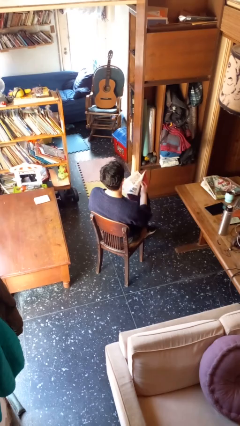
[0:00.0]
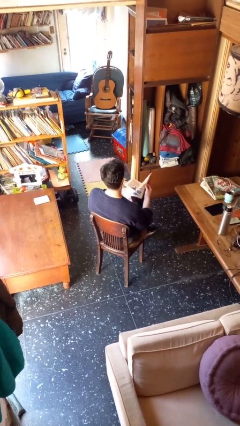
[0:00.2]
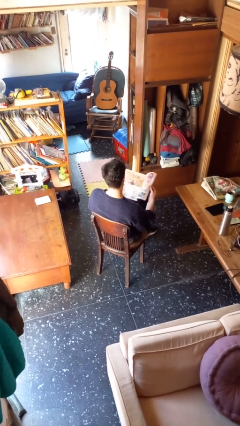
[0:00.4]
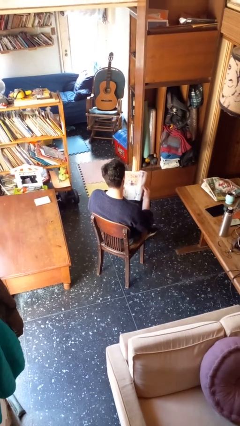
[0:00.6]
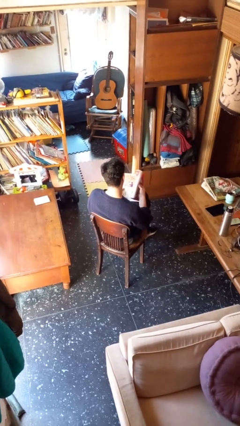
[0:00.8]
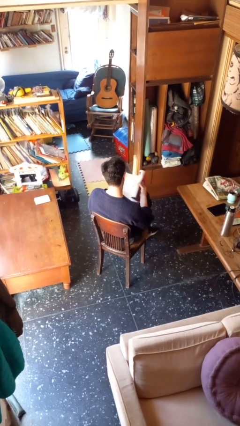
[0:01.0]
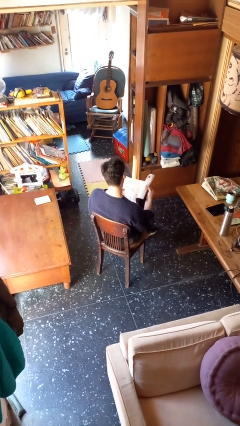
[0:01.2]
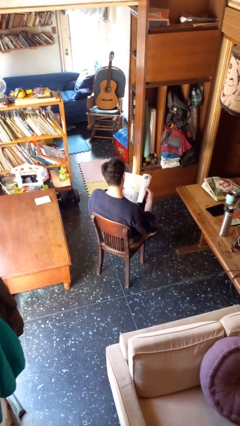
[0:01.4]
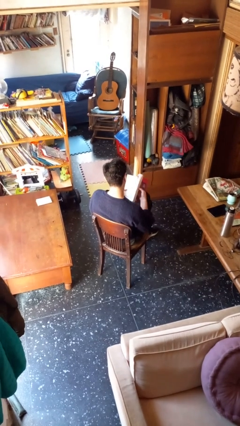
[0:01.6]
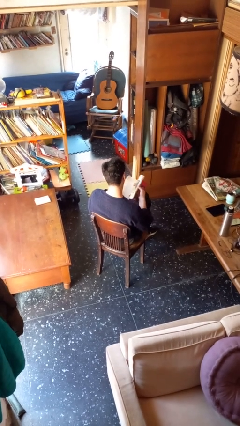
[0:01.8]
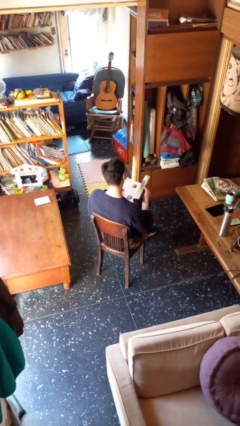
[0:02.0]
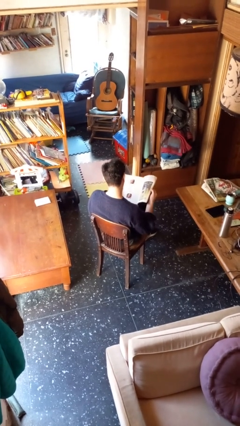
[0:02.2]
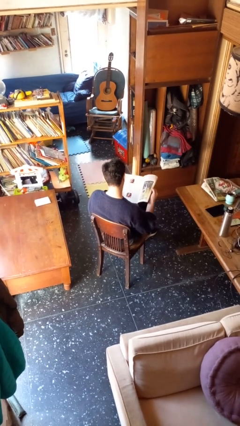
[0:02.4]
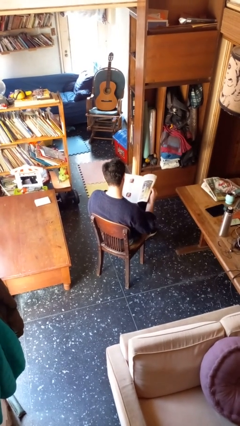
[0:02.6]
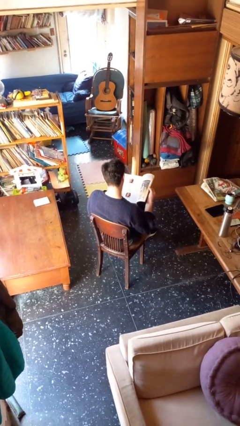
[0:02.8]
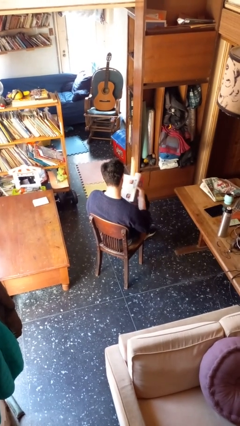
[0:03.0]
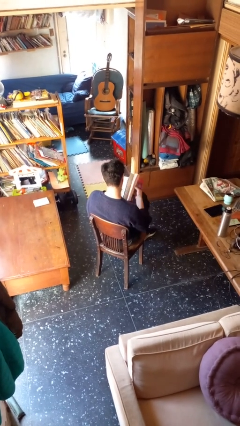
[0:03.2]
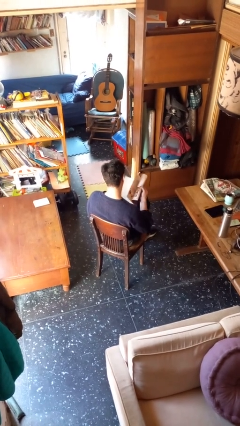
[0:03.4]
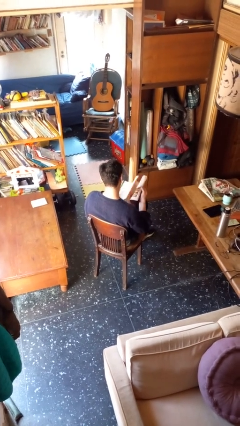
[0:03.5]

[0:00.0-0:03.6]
person reads magazine

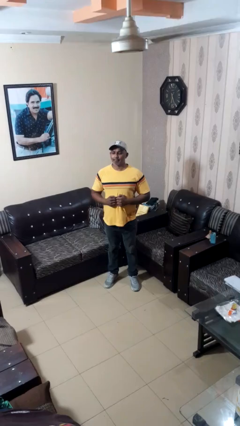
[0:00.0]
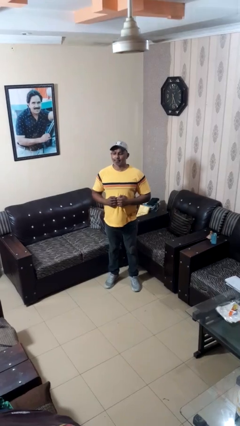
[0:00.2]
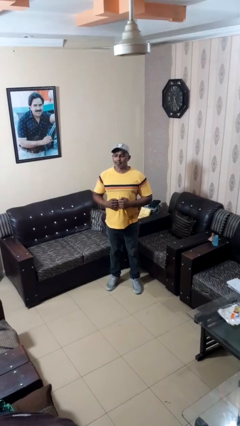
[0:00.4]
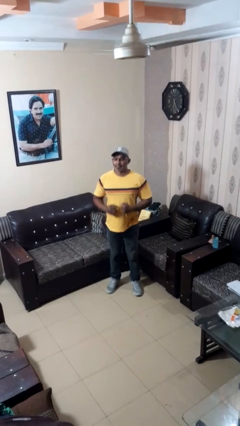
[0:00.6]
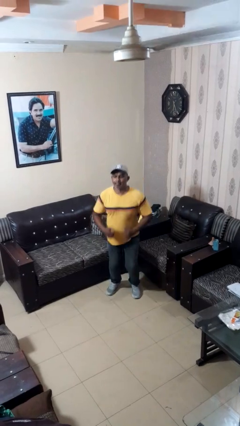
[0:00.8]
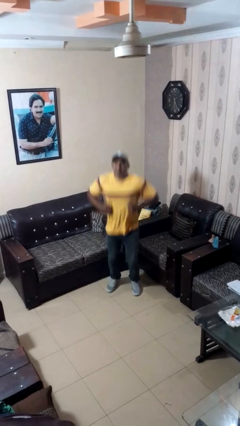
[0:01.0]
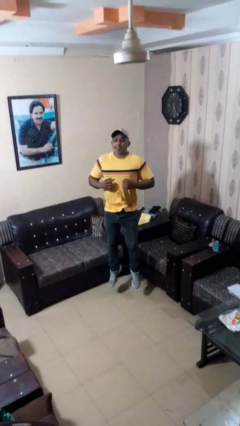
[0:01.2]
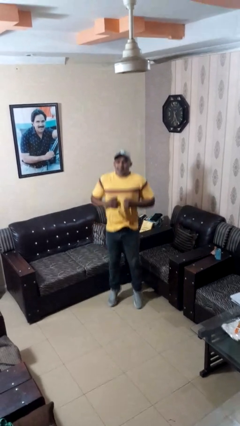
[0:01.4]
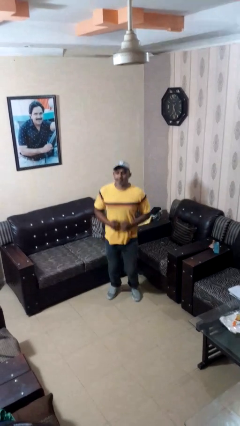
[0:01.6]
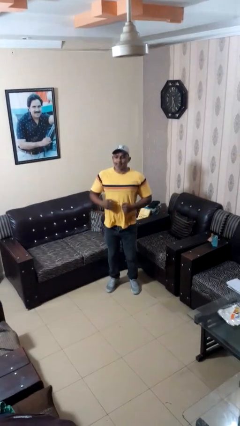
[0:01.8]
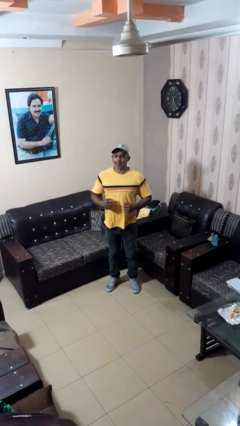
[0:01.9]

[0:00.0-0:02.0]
person jumps

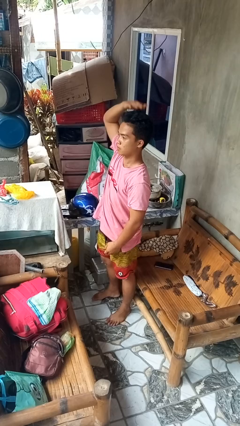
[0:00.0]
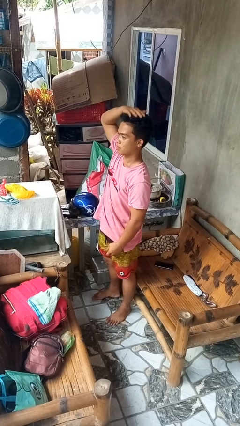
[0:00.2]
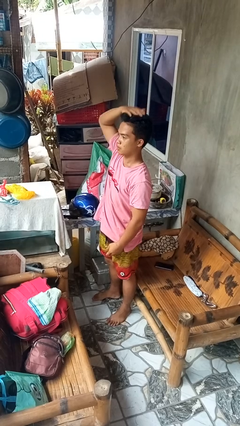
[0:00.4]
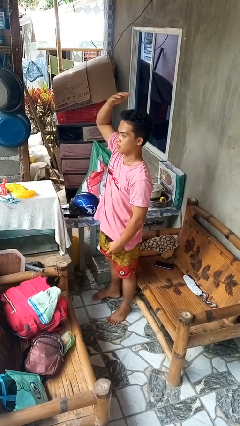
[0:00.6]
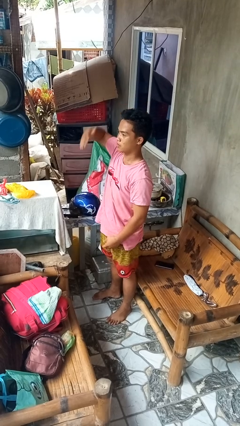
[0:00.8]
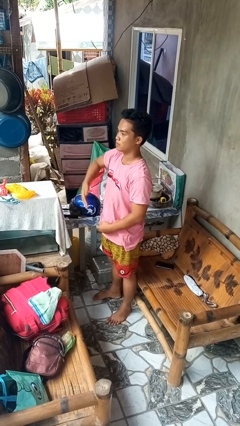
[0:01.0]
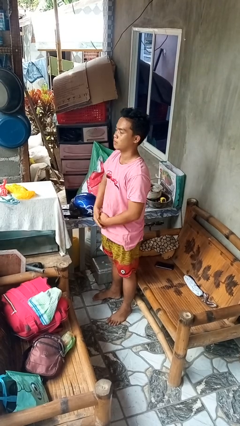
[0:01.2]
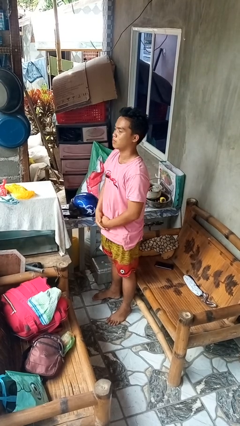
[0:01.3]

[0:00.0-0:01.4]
person pats head

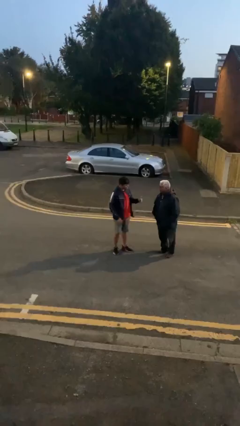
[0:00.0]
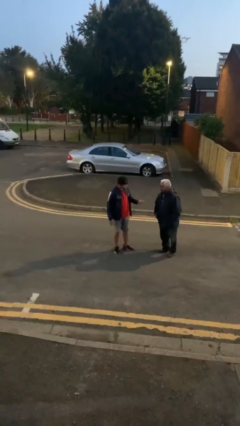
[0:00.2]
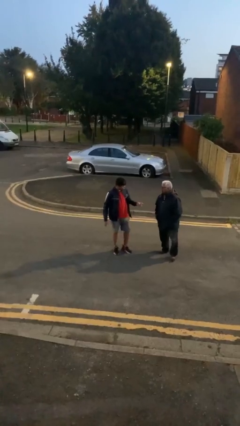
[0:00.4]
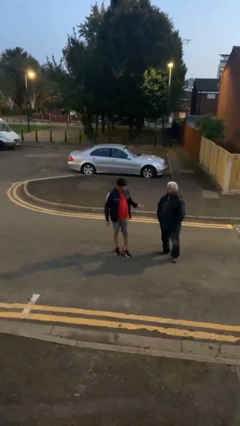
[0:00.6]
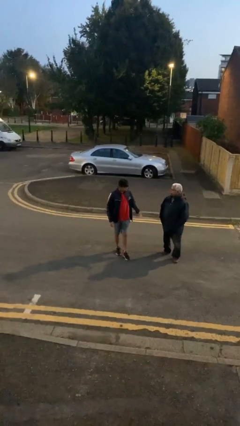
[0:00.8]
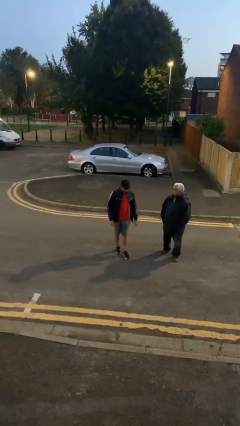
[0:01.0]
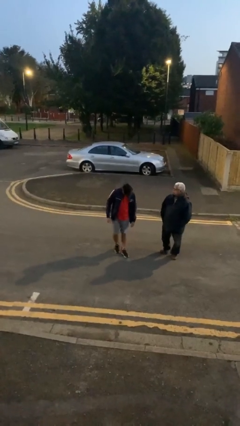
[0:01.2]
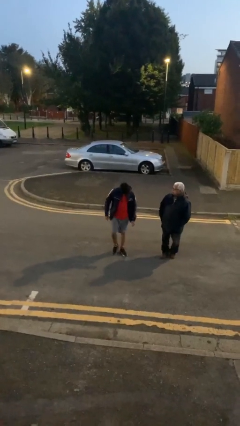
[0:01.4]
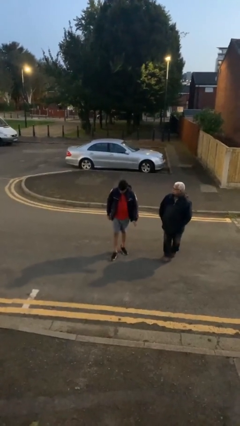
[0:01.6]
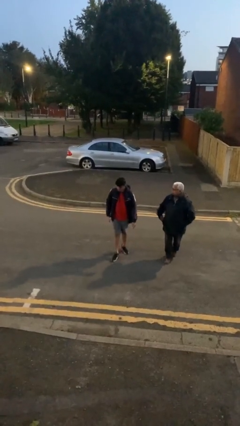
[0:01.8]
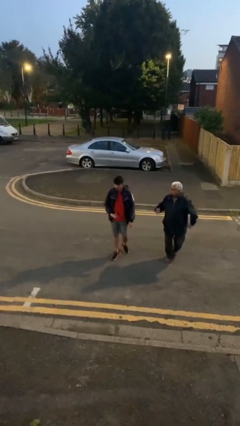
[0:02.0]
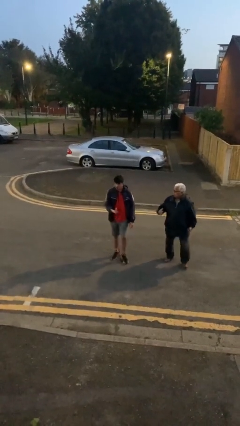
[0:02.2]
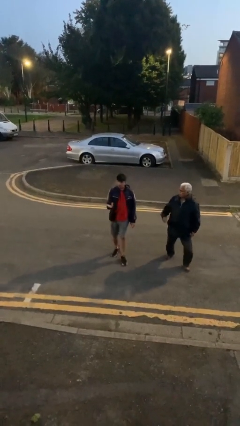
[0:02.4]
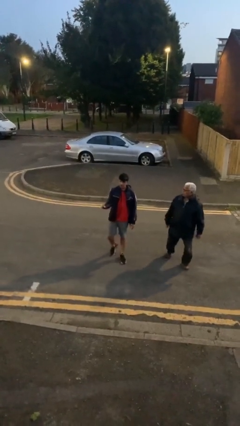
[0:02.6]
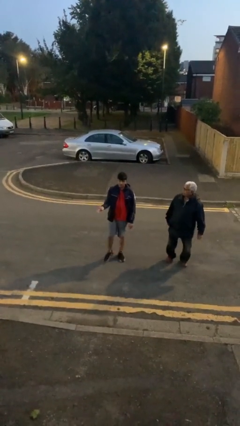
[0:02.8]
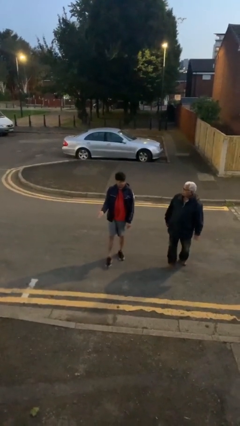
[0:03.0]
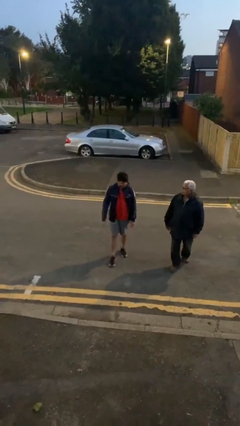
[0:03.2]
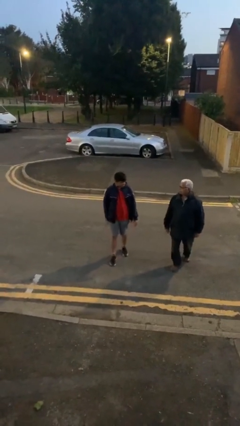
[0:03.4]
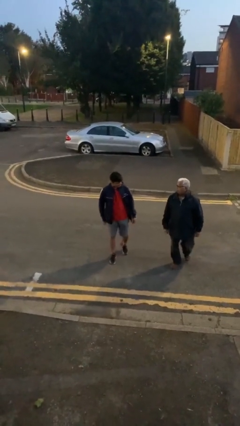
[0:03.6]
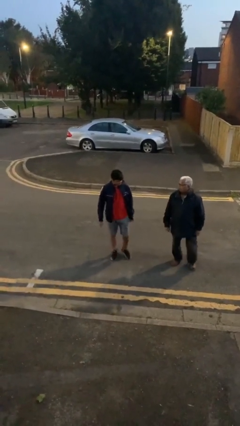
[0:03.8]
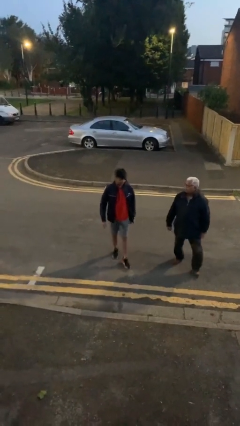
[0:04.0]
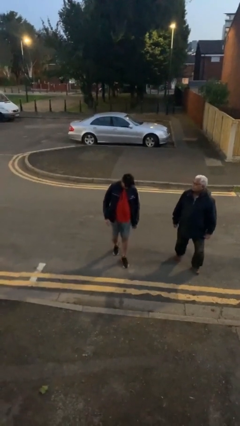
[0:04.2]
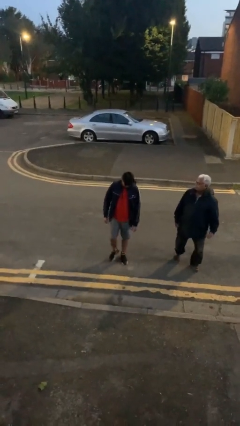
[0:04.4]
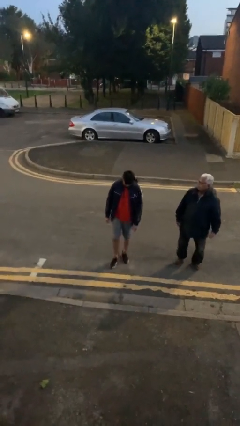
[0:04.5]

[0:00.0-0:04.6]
person talks to person

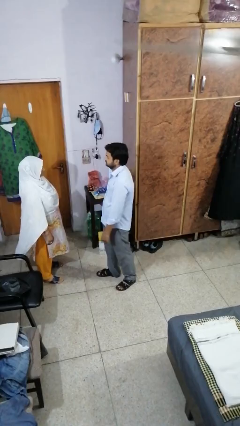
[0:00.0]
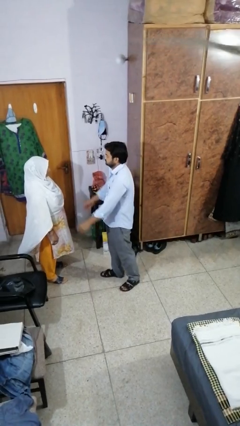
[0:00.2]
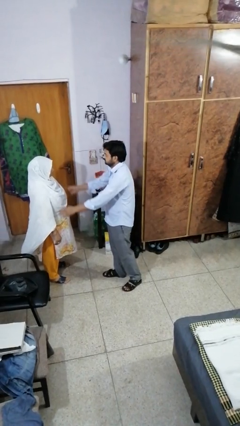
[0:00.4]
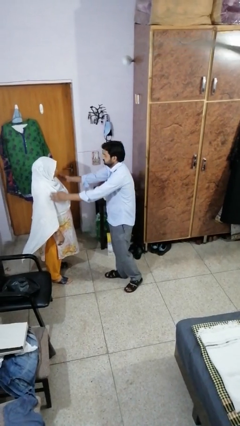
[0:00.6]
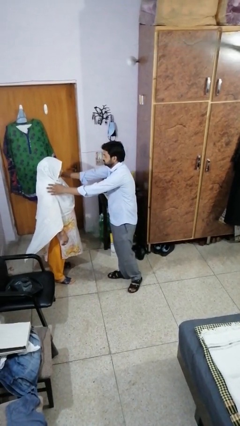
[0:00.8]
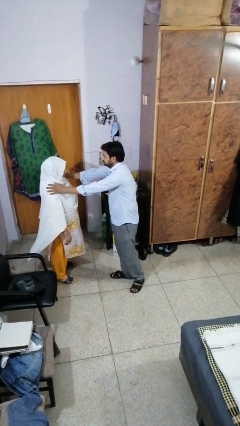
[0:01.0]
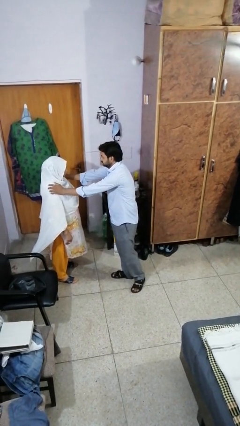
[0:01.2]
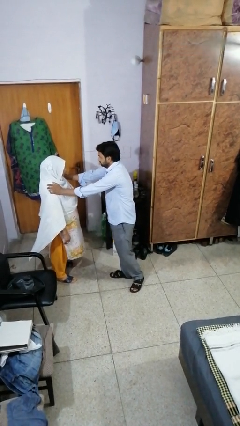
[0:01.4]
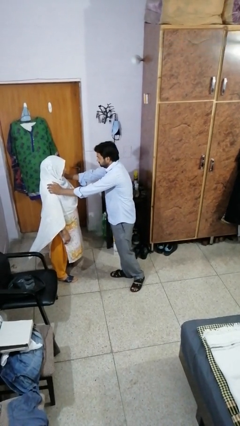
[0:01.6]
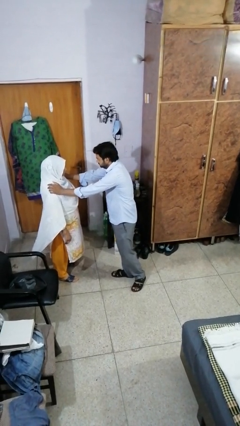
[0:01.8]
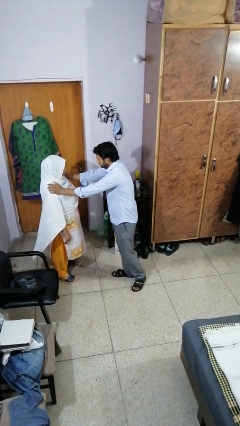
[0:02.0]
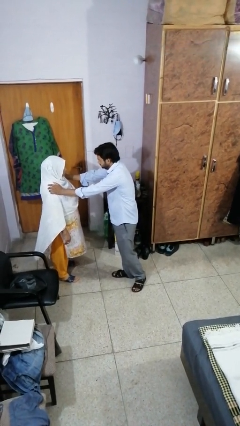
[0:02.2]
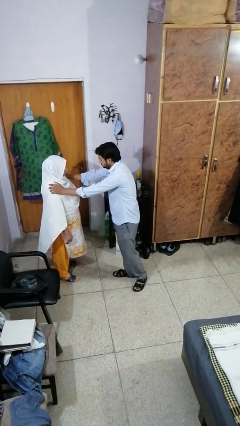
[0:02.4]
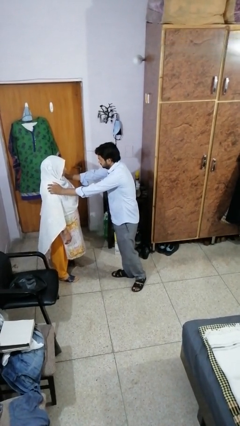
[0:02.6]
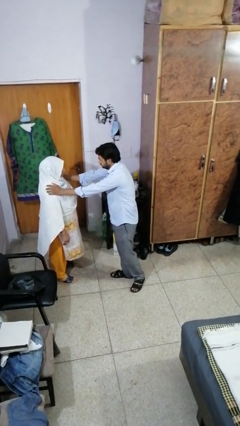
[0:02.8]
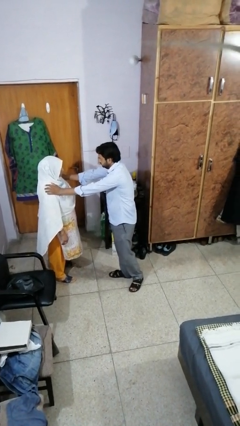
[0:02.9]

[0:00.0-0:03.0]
person pounds shoulders of person

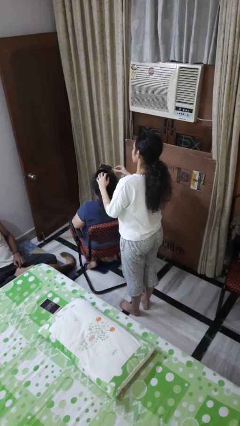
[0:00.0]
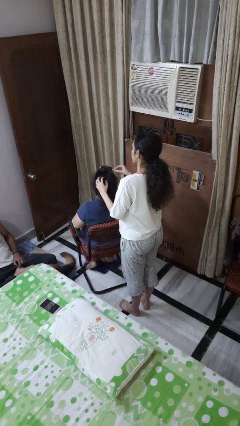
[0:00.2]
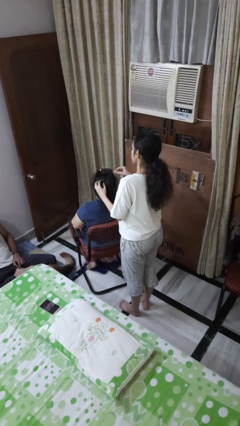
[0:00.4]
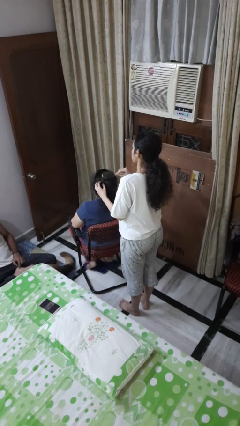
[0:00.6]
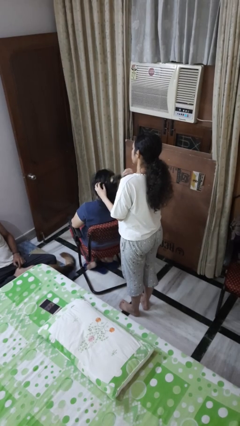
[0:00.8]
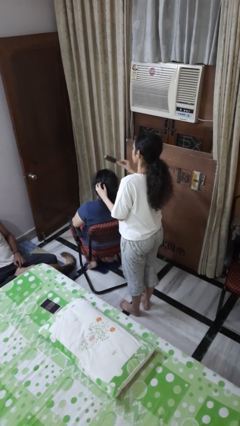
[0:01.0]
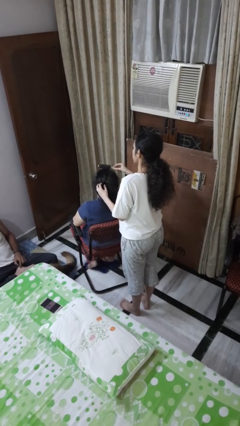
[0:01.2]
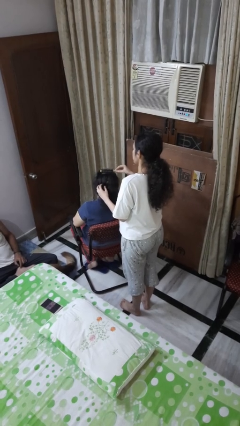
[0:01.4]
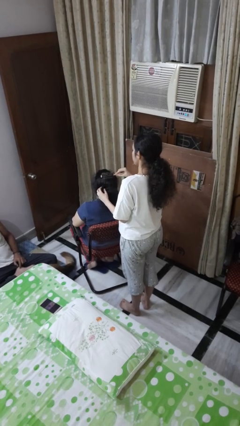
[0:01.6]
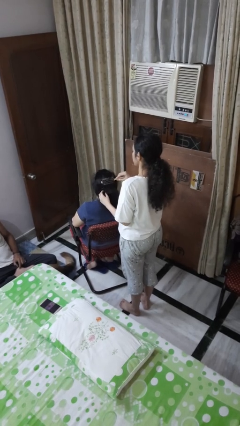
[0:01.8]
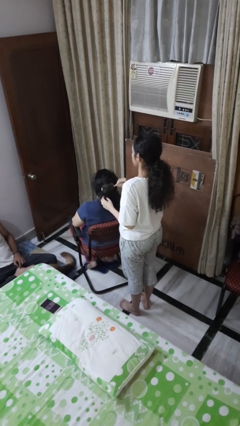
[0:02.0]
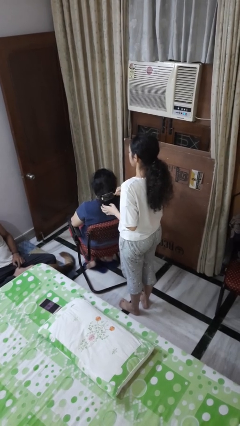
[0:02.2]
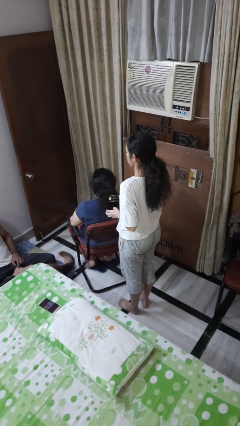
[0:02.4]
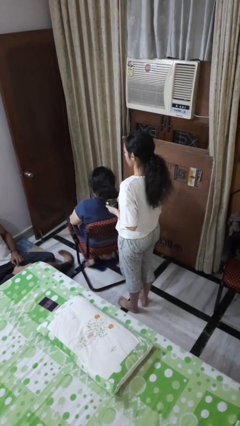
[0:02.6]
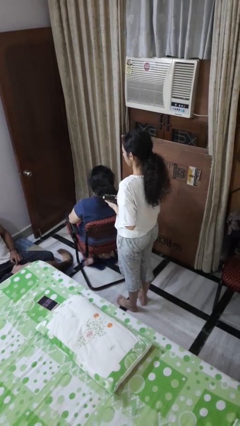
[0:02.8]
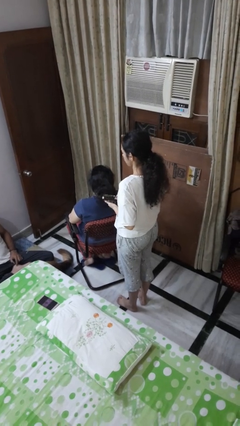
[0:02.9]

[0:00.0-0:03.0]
person brushes hair of person
